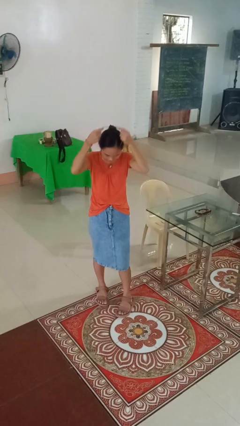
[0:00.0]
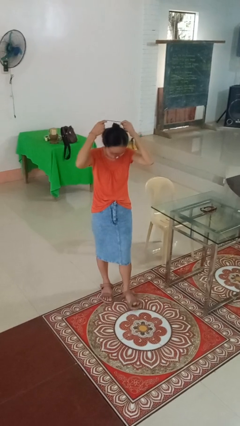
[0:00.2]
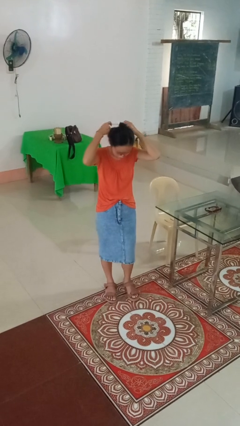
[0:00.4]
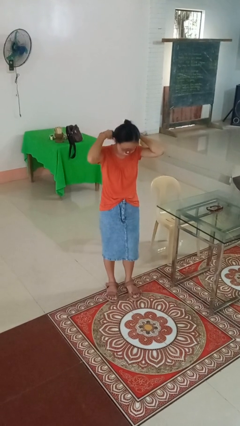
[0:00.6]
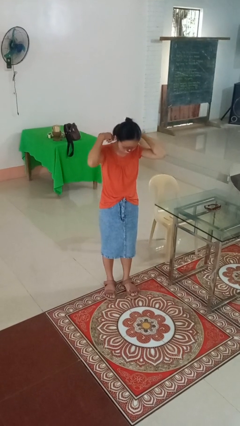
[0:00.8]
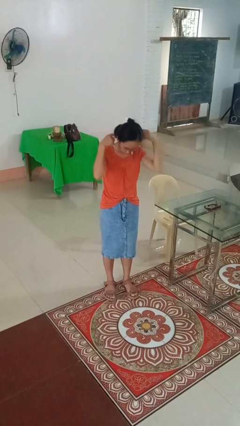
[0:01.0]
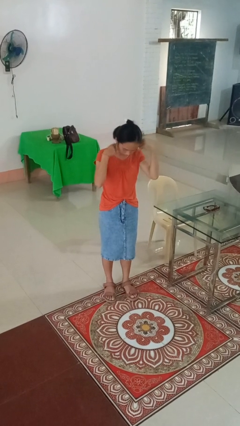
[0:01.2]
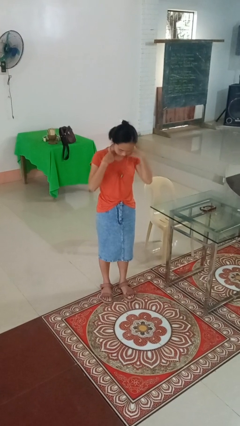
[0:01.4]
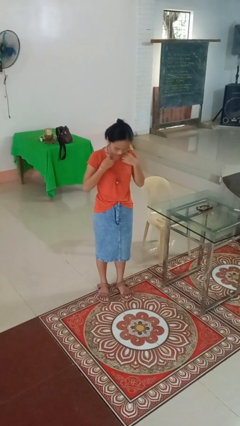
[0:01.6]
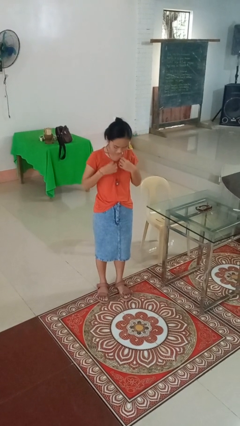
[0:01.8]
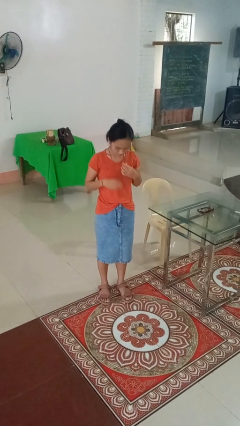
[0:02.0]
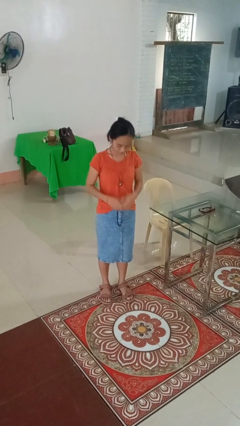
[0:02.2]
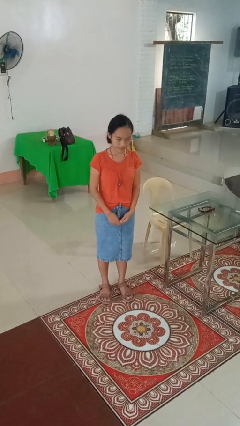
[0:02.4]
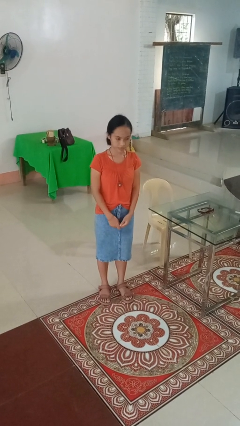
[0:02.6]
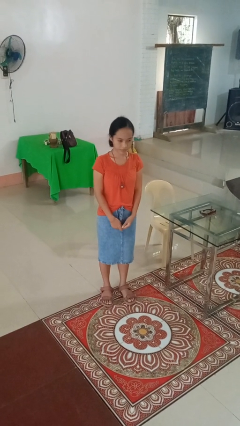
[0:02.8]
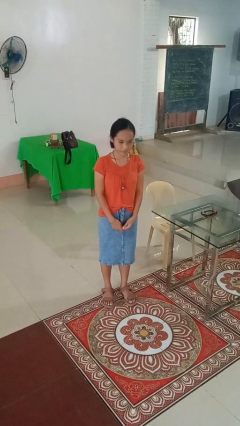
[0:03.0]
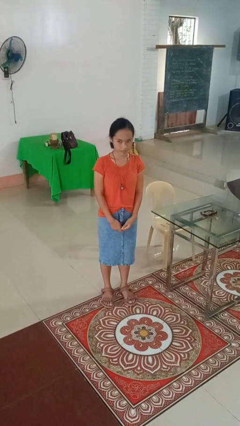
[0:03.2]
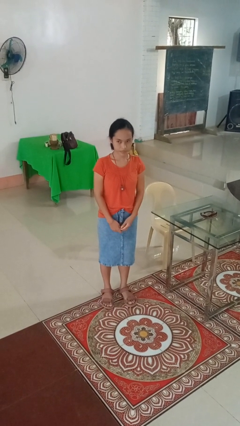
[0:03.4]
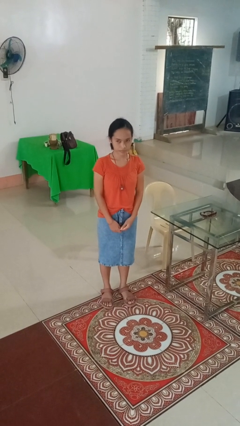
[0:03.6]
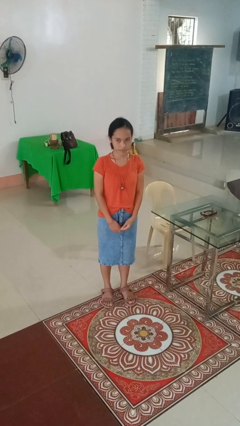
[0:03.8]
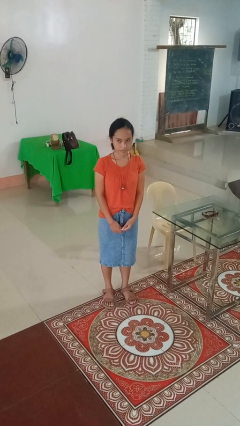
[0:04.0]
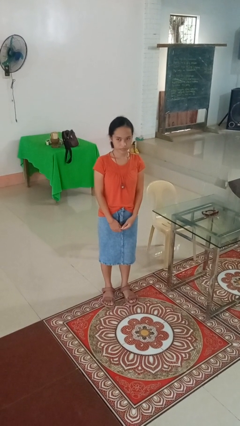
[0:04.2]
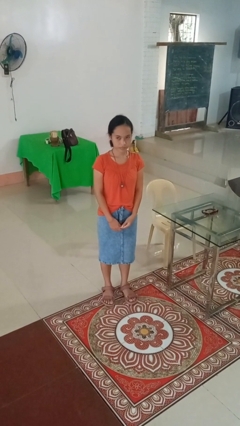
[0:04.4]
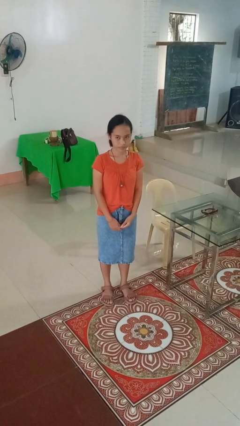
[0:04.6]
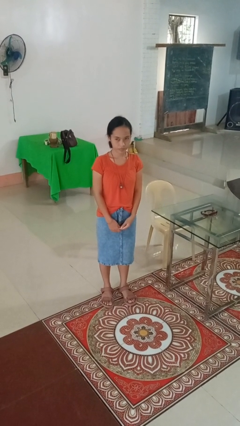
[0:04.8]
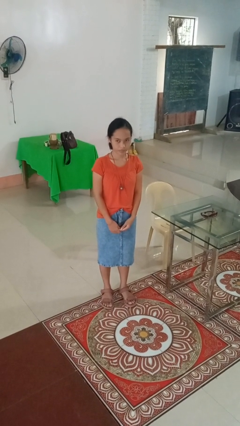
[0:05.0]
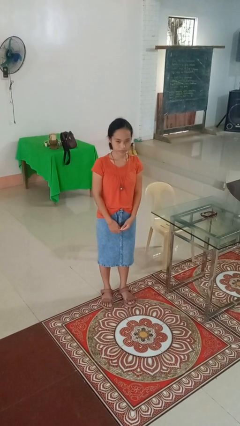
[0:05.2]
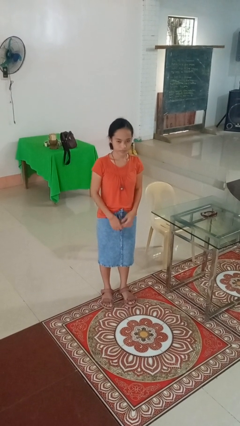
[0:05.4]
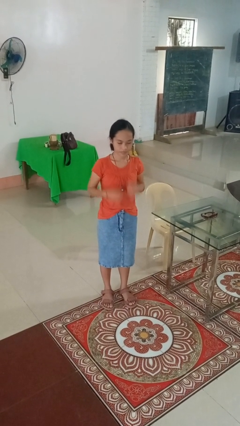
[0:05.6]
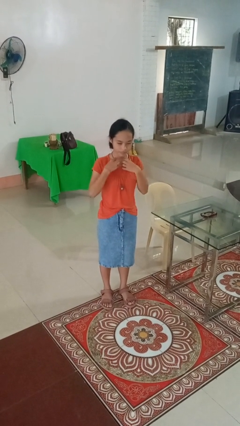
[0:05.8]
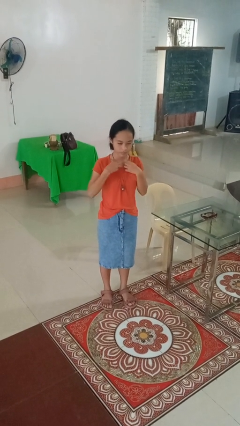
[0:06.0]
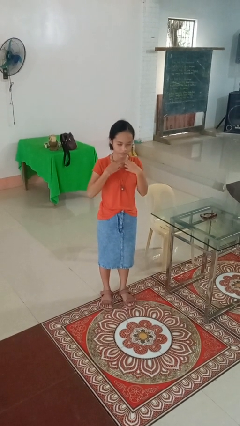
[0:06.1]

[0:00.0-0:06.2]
person puts on necklace

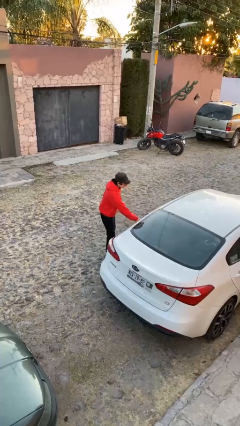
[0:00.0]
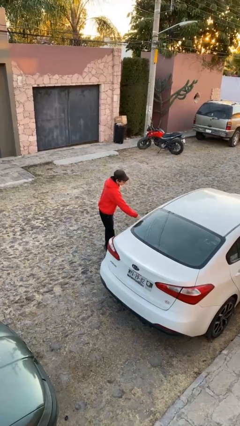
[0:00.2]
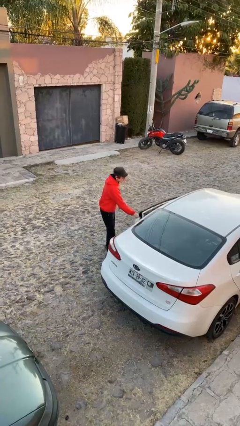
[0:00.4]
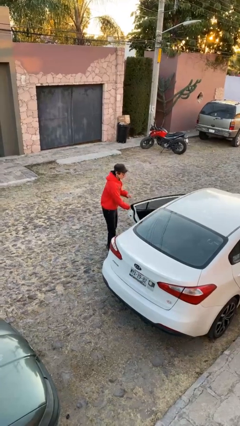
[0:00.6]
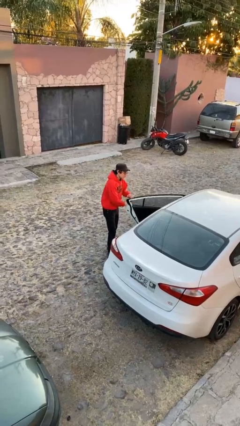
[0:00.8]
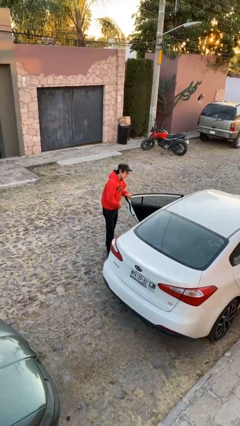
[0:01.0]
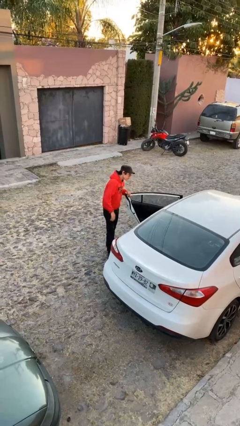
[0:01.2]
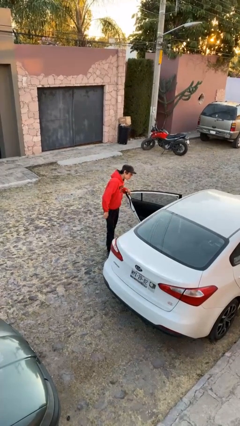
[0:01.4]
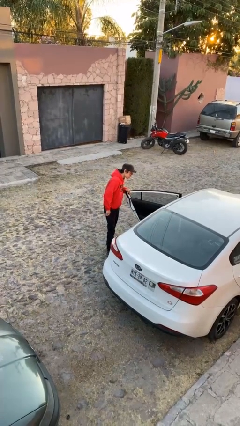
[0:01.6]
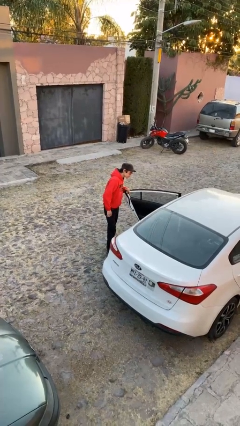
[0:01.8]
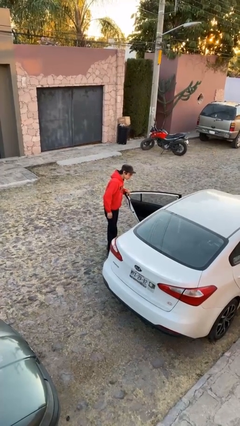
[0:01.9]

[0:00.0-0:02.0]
person opens car door

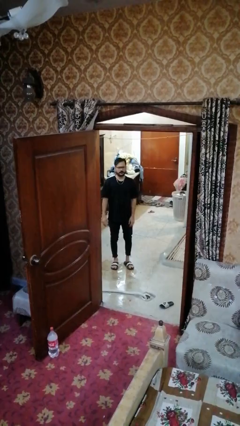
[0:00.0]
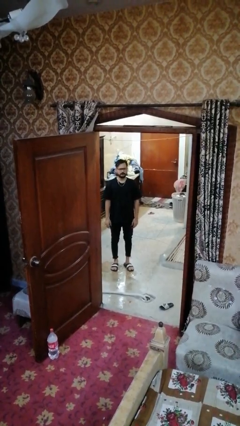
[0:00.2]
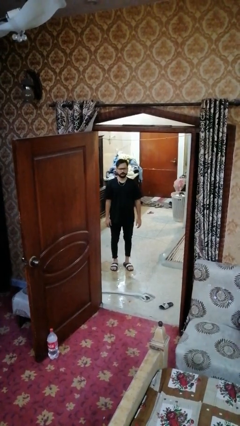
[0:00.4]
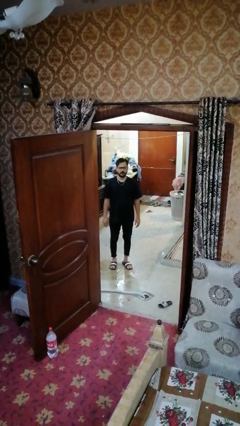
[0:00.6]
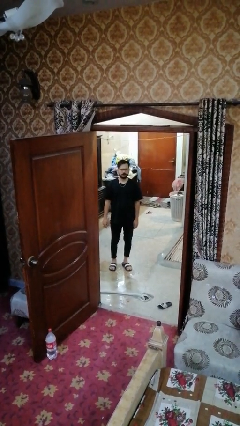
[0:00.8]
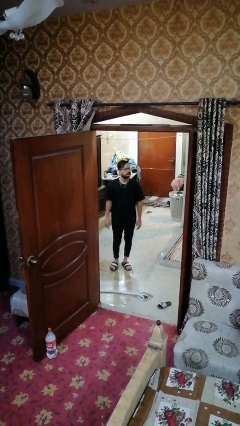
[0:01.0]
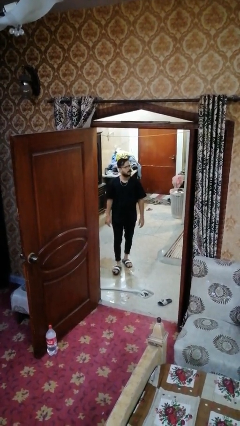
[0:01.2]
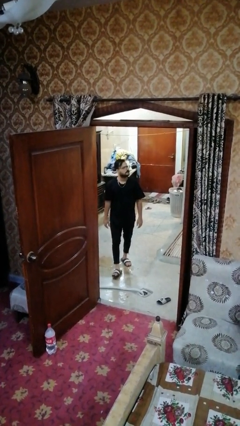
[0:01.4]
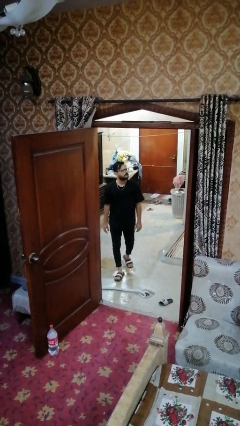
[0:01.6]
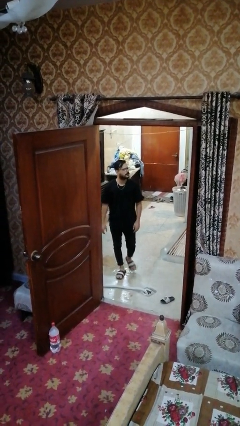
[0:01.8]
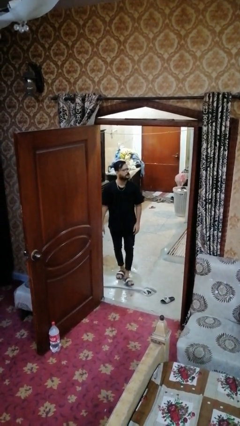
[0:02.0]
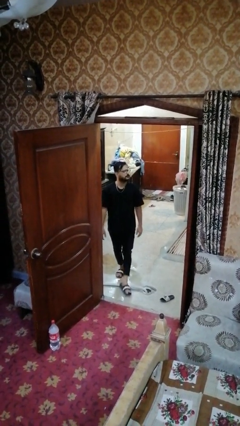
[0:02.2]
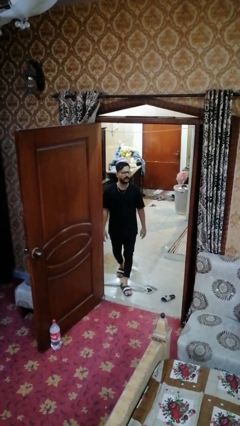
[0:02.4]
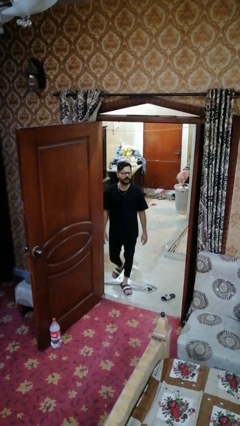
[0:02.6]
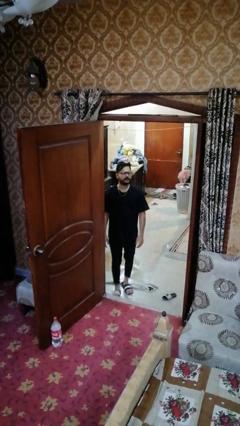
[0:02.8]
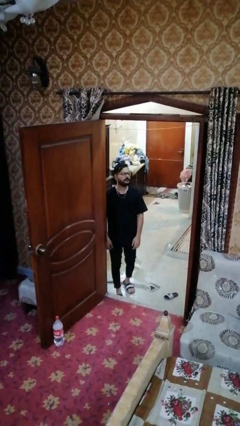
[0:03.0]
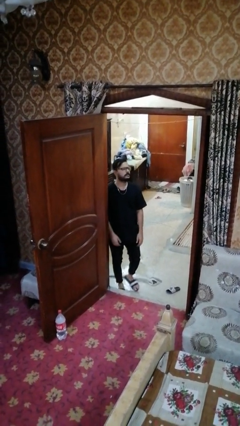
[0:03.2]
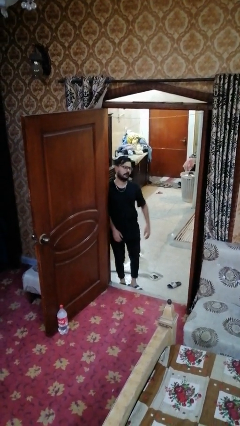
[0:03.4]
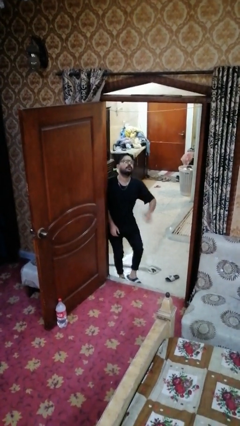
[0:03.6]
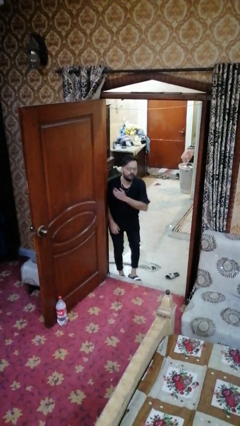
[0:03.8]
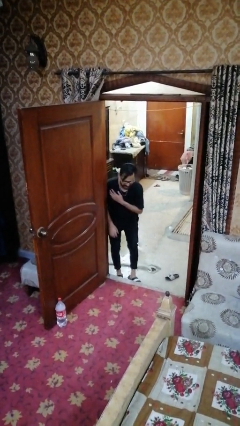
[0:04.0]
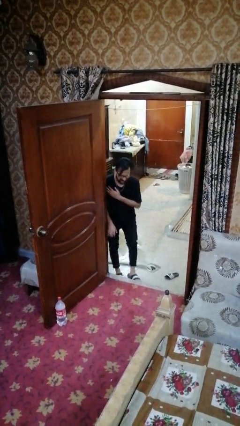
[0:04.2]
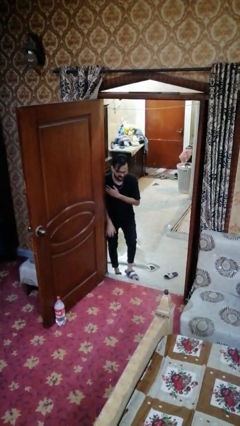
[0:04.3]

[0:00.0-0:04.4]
person bumps into wall

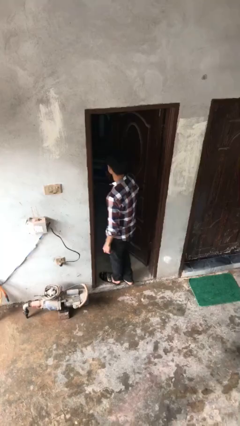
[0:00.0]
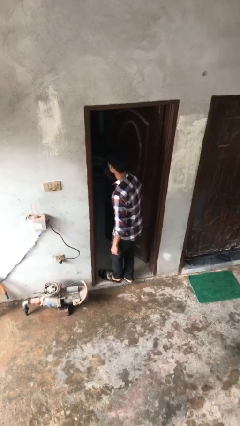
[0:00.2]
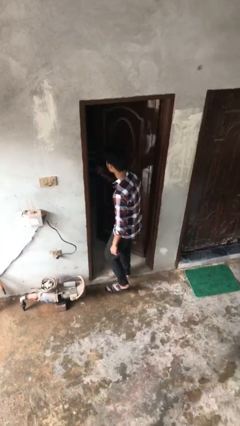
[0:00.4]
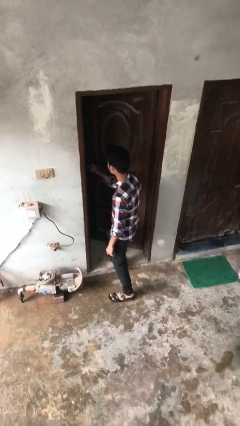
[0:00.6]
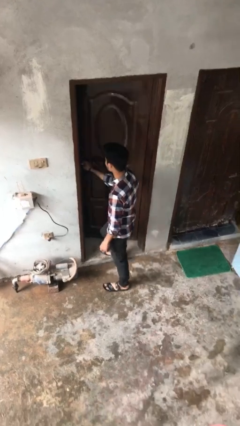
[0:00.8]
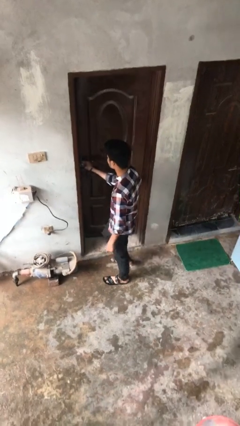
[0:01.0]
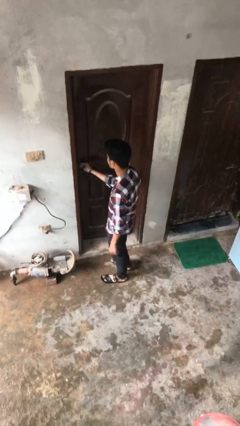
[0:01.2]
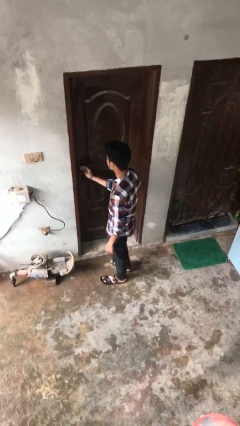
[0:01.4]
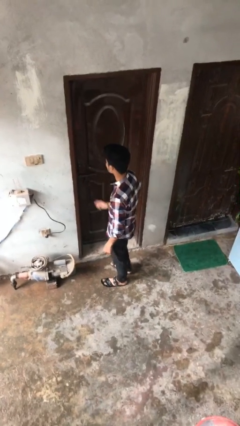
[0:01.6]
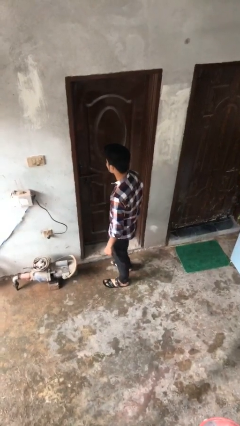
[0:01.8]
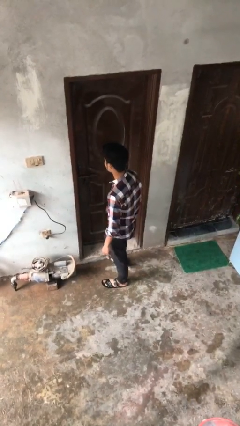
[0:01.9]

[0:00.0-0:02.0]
person closes facility door

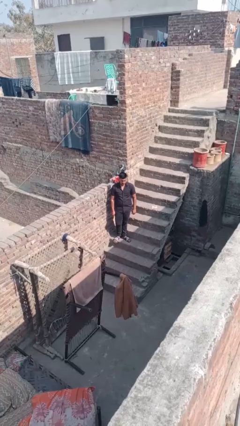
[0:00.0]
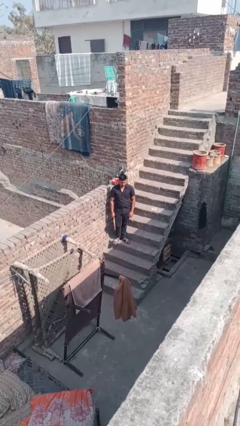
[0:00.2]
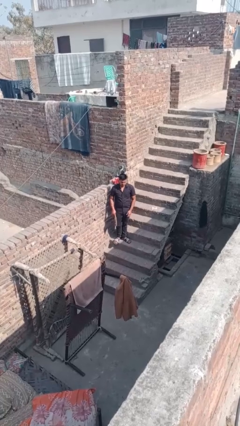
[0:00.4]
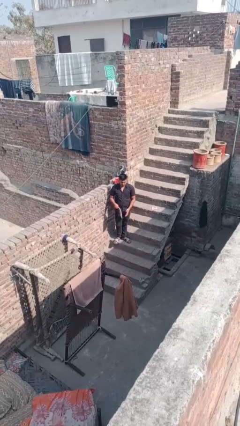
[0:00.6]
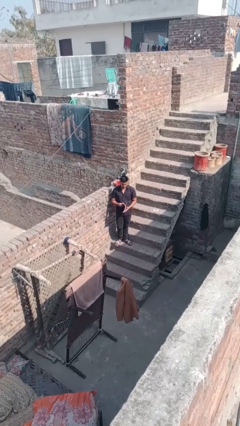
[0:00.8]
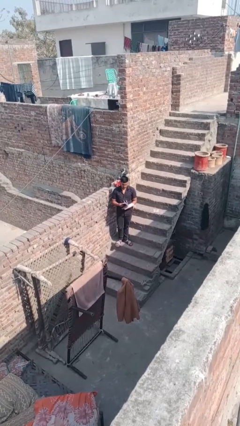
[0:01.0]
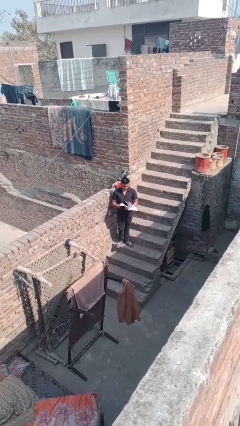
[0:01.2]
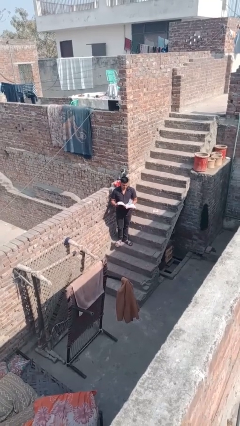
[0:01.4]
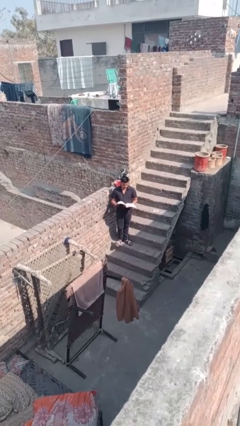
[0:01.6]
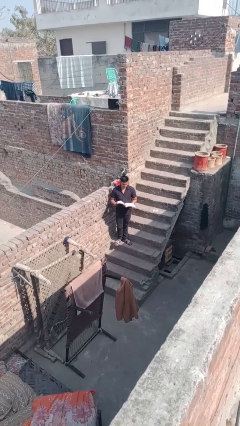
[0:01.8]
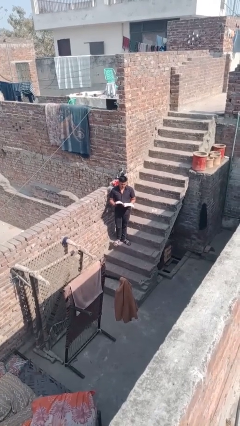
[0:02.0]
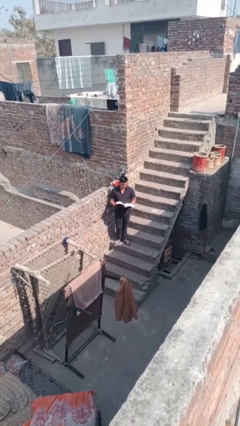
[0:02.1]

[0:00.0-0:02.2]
person reads document

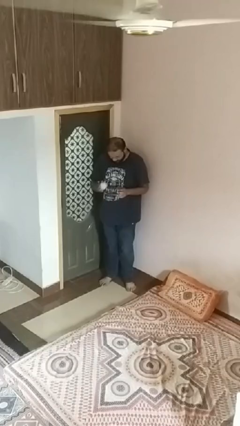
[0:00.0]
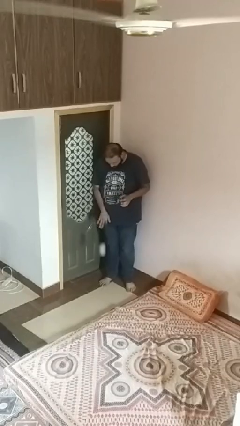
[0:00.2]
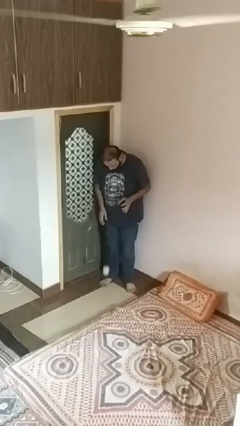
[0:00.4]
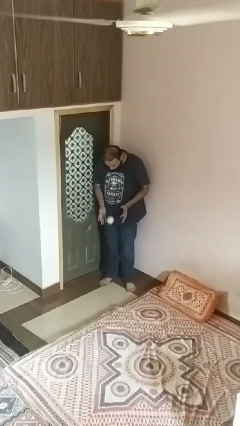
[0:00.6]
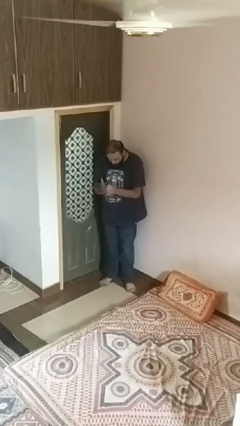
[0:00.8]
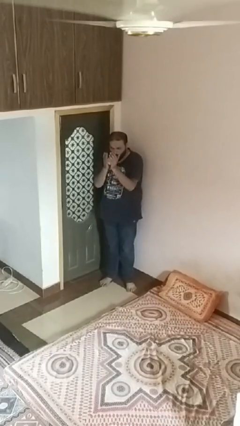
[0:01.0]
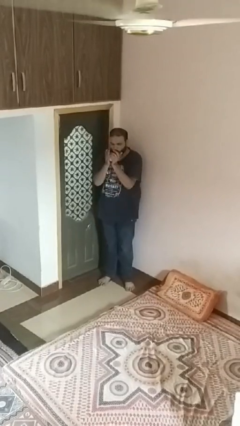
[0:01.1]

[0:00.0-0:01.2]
person bounces ball on floor
